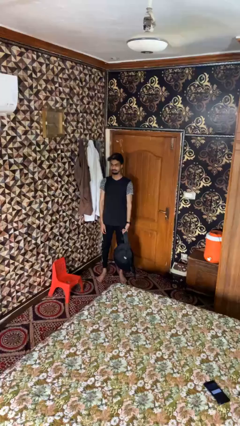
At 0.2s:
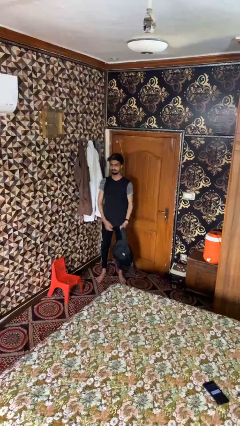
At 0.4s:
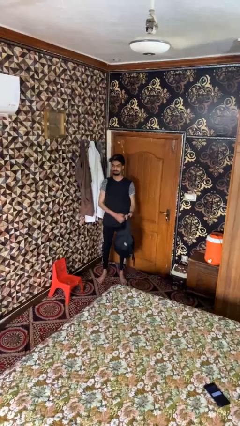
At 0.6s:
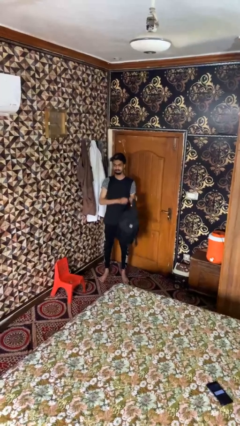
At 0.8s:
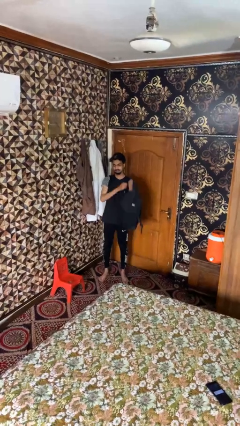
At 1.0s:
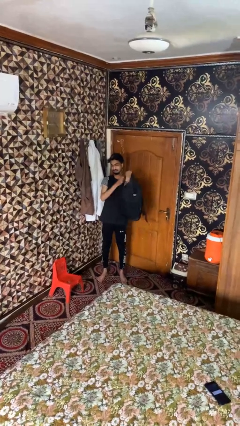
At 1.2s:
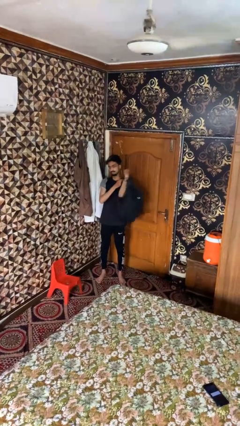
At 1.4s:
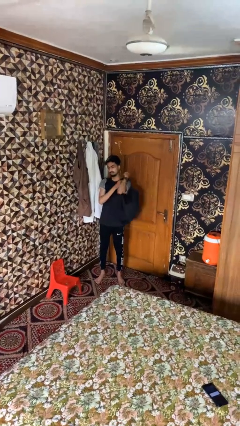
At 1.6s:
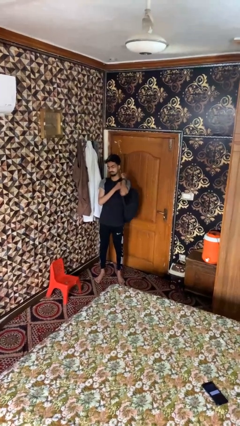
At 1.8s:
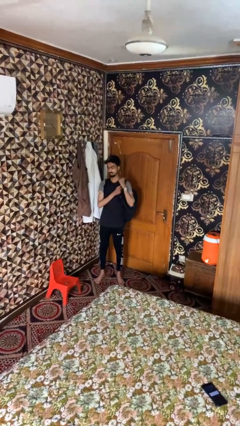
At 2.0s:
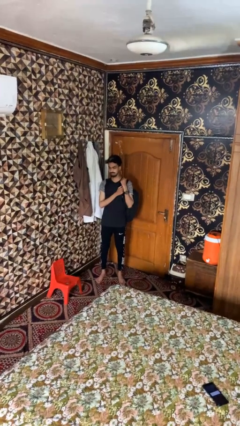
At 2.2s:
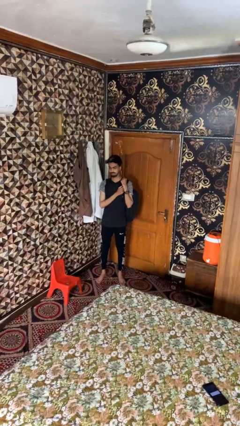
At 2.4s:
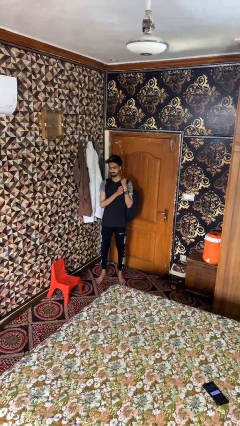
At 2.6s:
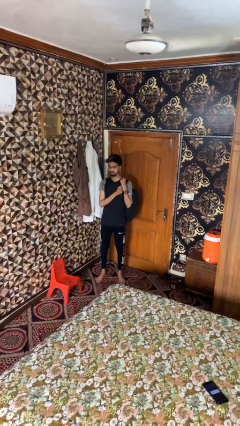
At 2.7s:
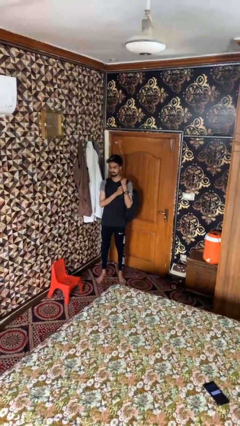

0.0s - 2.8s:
person puts on backpack

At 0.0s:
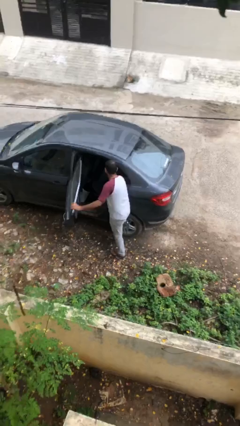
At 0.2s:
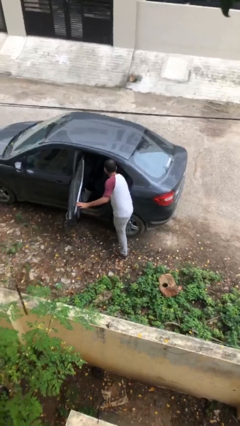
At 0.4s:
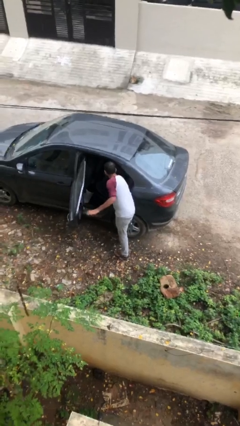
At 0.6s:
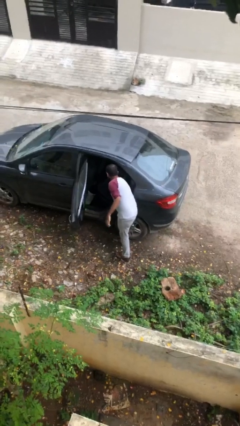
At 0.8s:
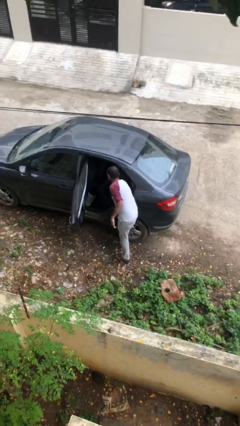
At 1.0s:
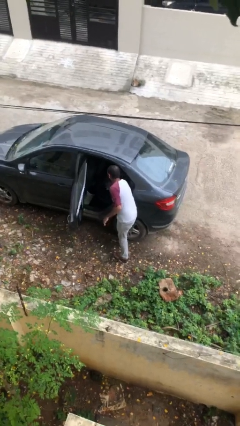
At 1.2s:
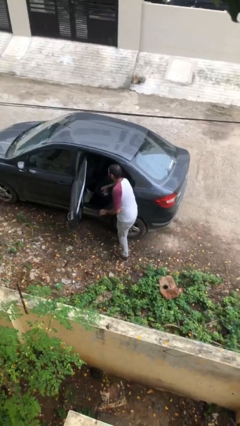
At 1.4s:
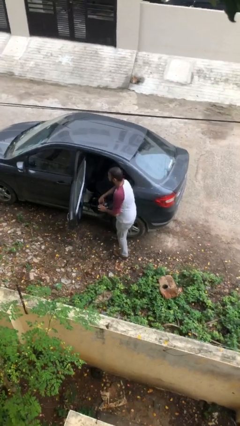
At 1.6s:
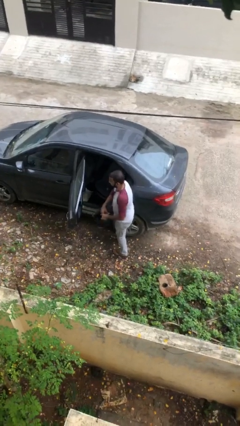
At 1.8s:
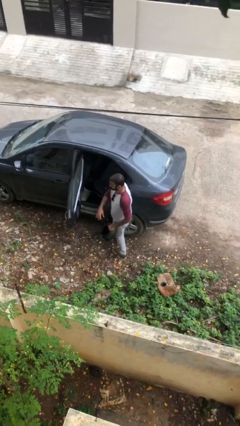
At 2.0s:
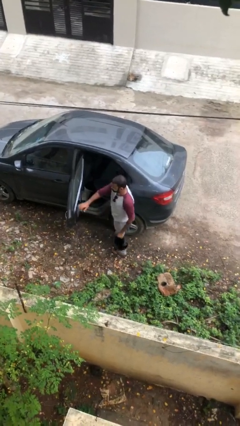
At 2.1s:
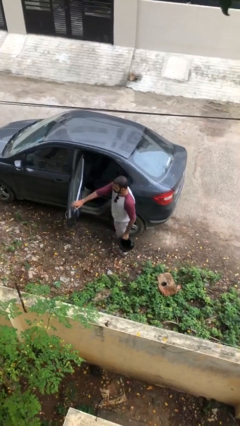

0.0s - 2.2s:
person unloads car

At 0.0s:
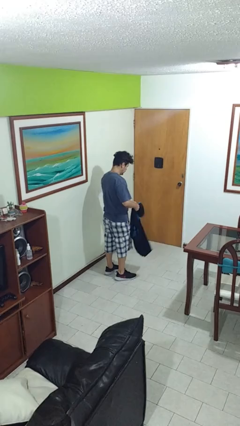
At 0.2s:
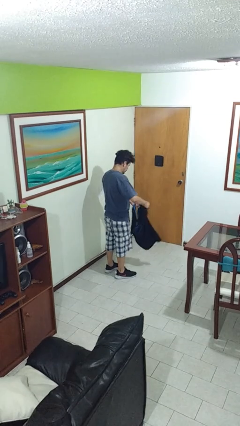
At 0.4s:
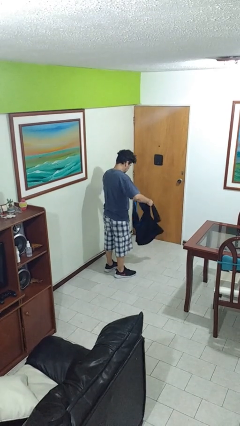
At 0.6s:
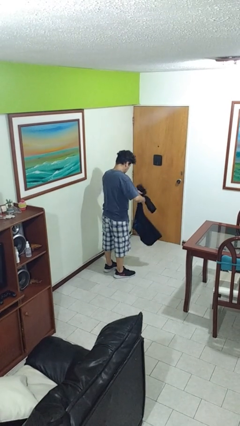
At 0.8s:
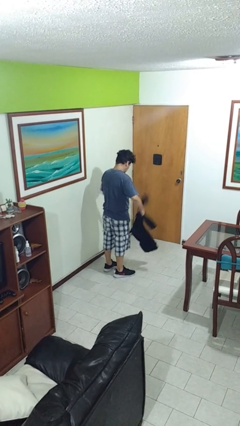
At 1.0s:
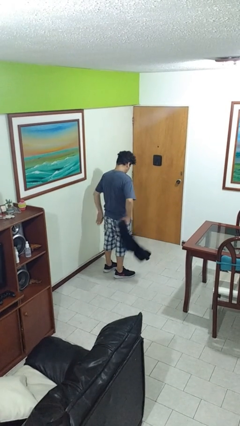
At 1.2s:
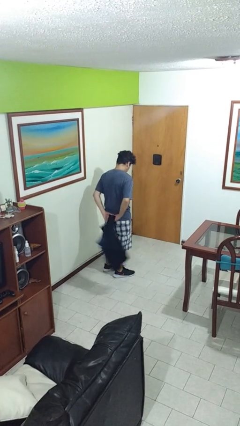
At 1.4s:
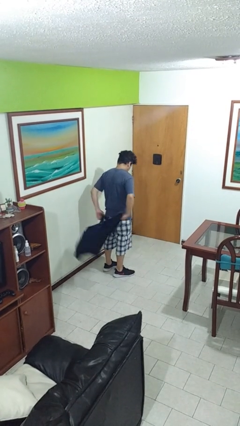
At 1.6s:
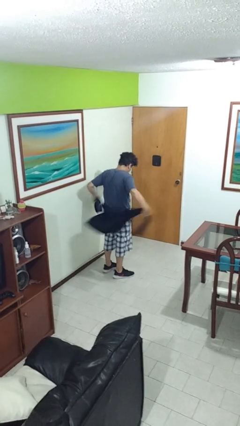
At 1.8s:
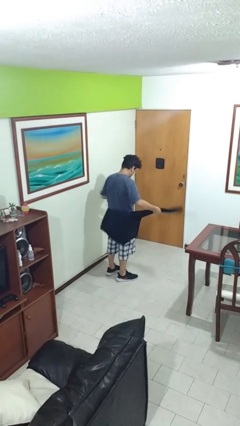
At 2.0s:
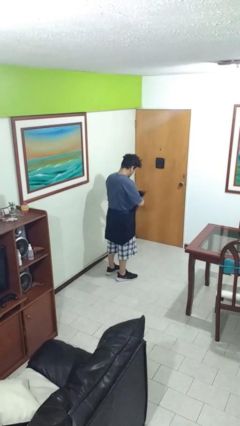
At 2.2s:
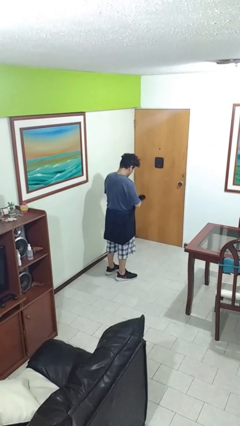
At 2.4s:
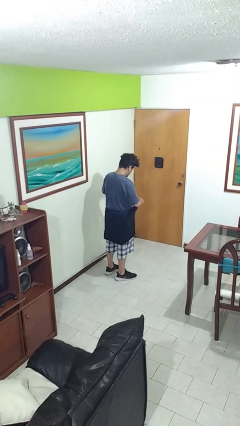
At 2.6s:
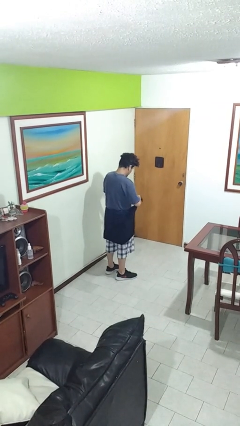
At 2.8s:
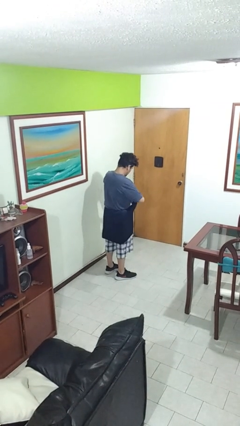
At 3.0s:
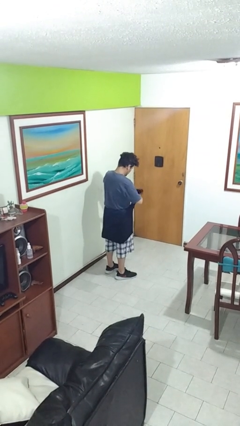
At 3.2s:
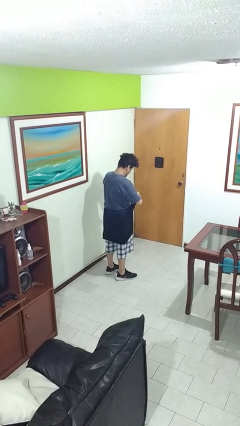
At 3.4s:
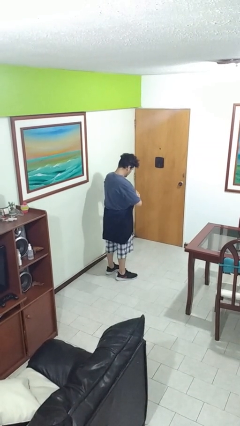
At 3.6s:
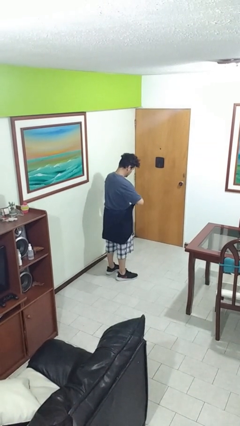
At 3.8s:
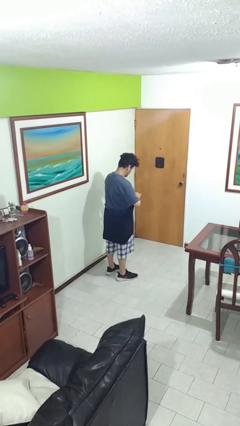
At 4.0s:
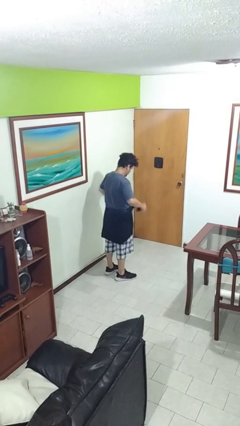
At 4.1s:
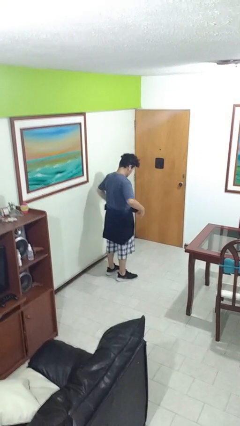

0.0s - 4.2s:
person ties jacket around waist

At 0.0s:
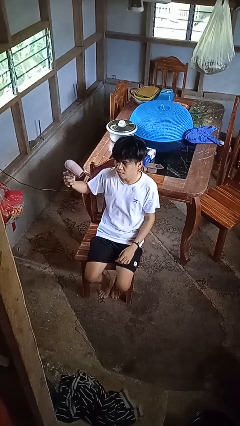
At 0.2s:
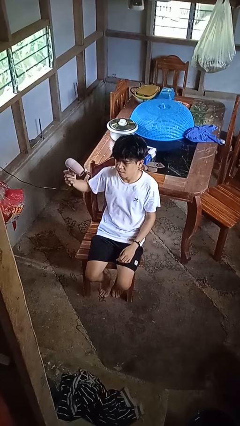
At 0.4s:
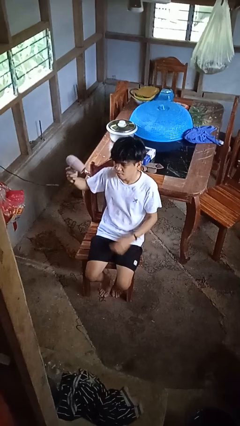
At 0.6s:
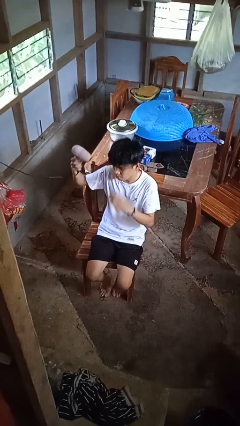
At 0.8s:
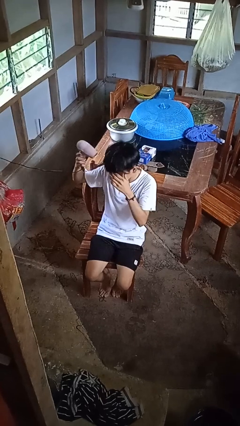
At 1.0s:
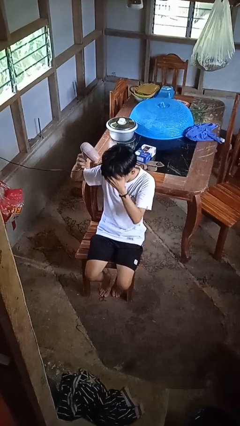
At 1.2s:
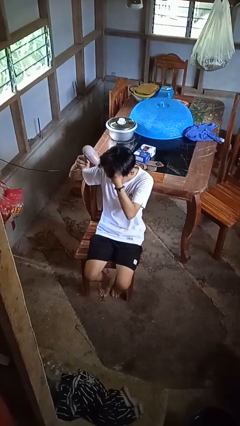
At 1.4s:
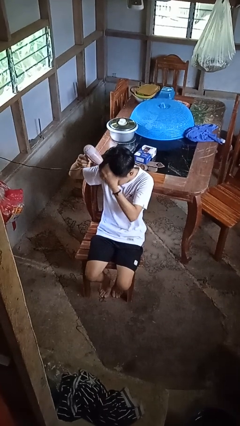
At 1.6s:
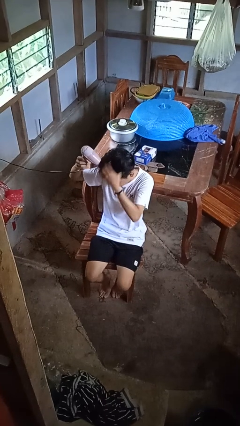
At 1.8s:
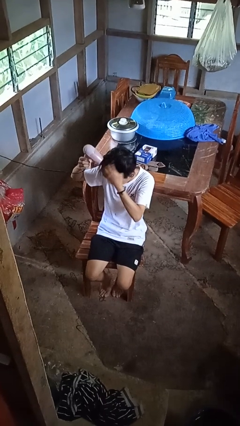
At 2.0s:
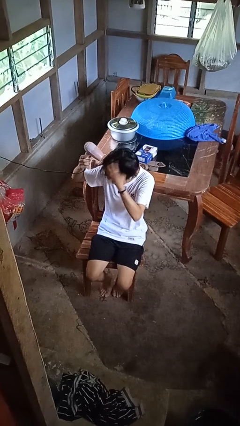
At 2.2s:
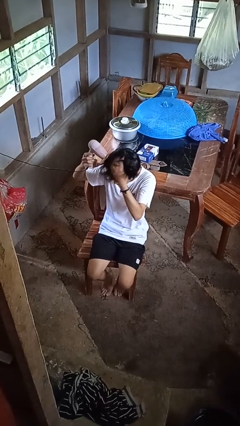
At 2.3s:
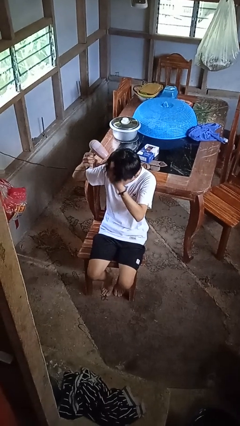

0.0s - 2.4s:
person dries hair with hairdryer

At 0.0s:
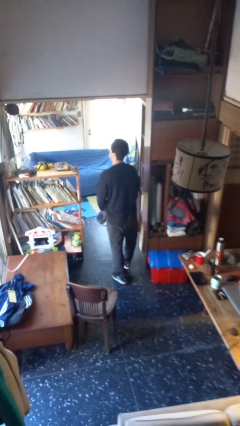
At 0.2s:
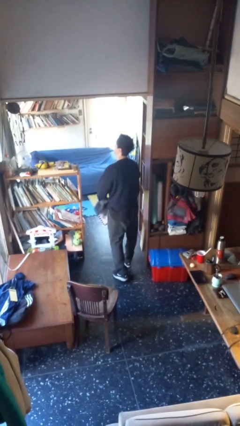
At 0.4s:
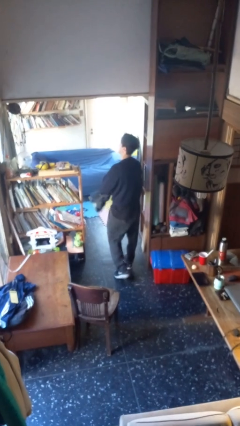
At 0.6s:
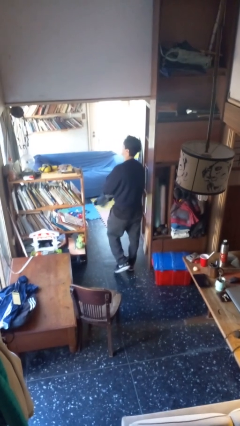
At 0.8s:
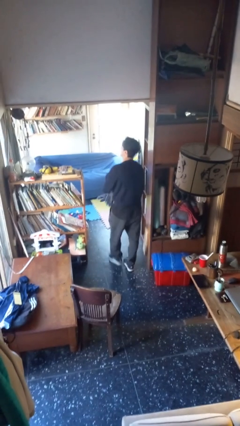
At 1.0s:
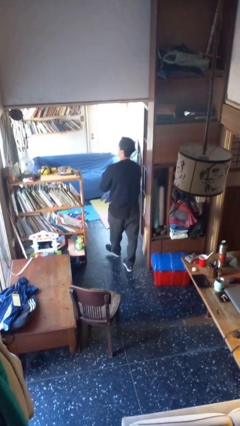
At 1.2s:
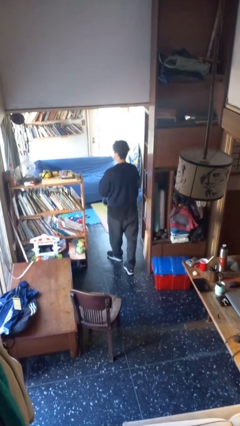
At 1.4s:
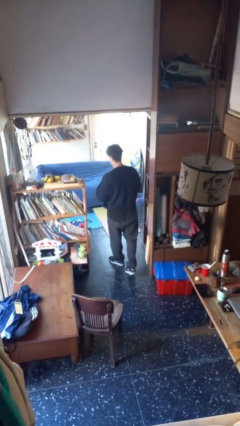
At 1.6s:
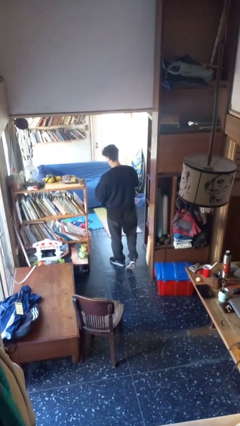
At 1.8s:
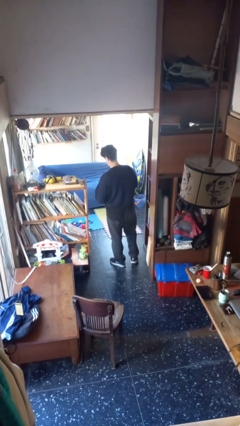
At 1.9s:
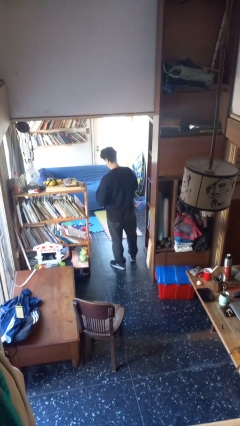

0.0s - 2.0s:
person puts on gloves

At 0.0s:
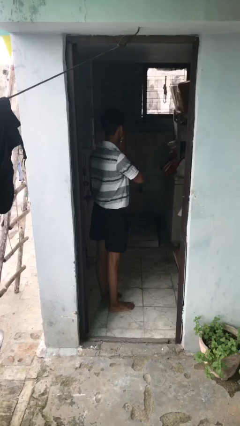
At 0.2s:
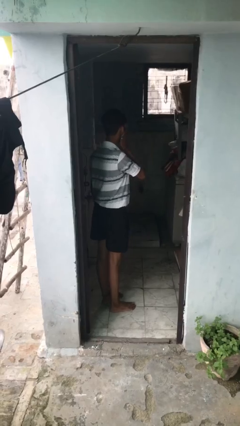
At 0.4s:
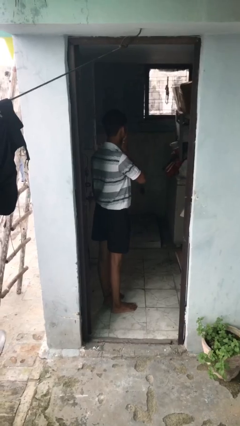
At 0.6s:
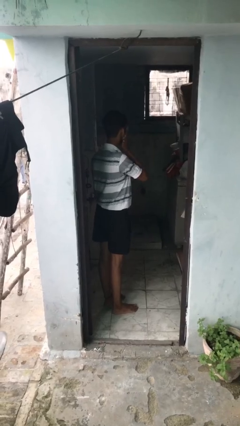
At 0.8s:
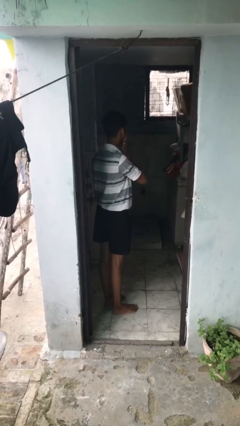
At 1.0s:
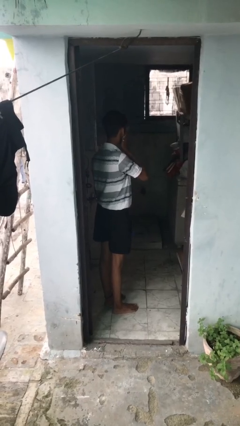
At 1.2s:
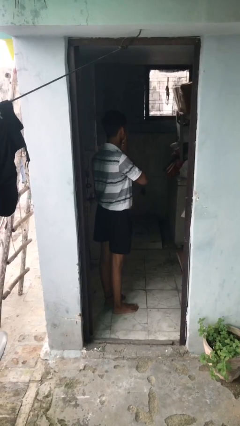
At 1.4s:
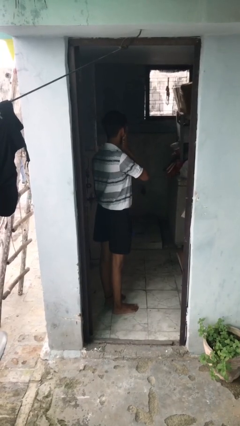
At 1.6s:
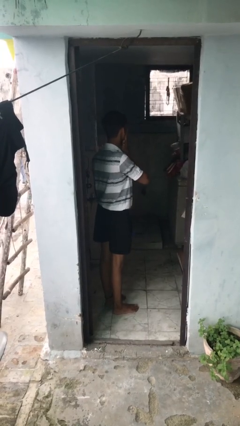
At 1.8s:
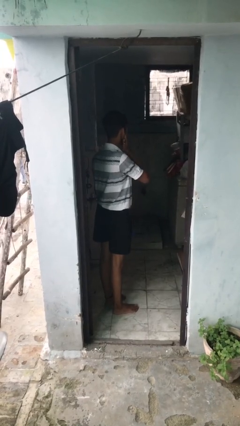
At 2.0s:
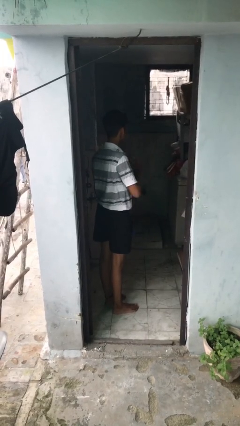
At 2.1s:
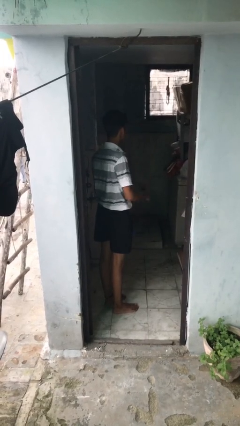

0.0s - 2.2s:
person applies shaving cream

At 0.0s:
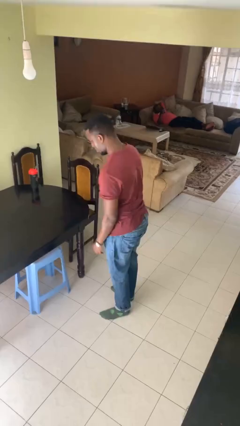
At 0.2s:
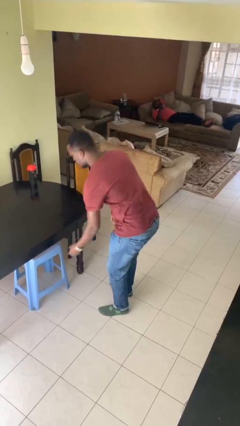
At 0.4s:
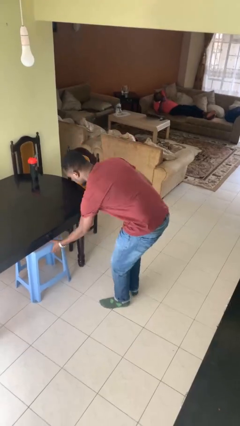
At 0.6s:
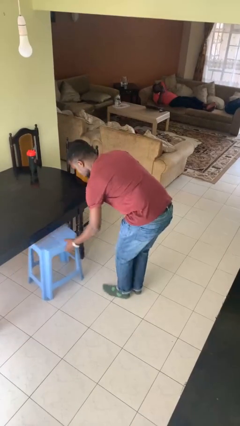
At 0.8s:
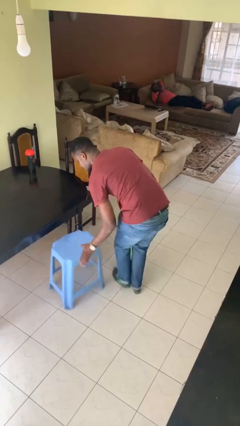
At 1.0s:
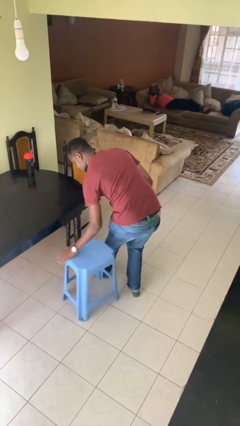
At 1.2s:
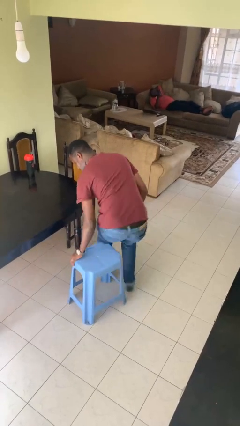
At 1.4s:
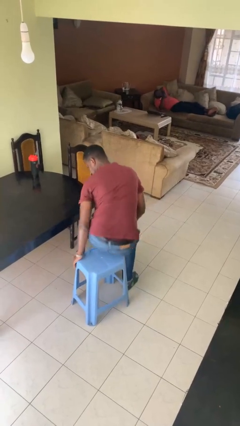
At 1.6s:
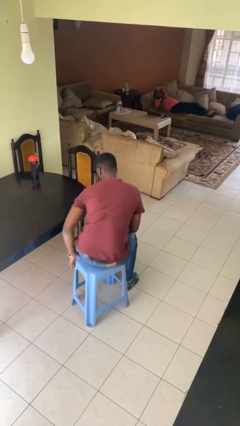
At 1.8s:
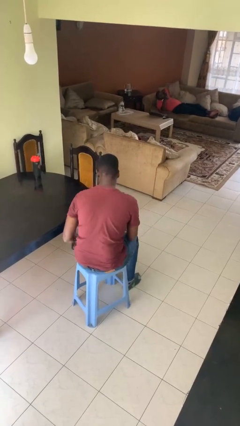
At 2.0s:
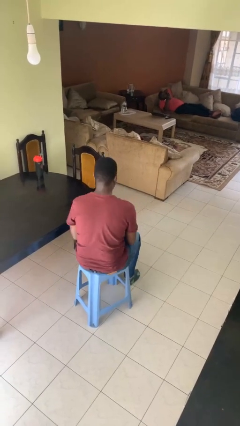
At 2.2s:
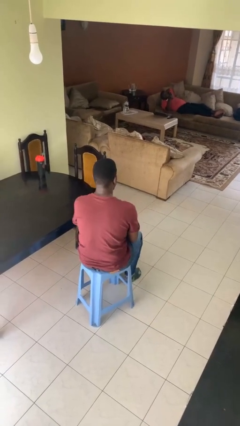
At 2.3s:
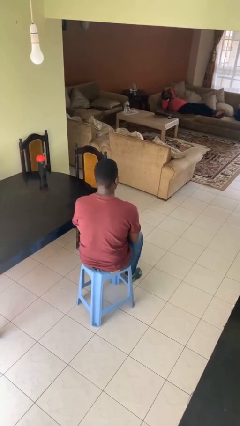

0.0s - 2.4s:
person sits down
